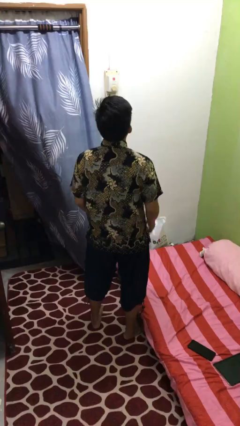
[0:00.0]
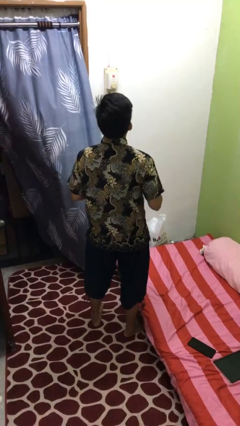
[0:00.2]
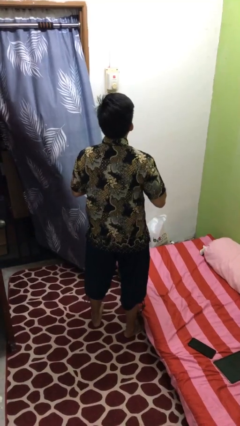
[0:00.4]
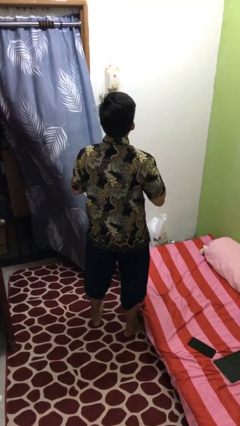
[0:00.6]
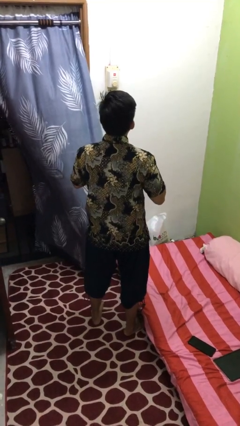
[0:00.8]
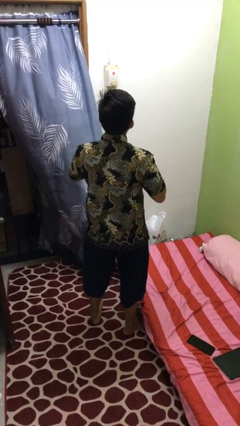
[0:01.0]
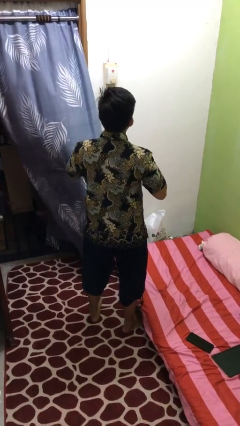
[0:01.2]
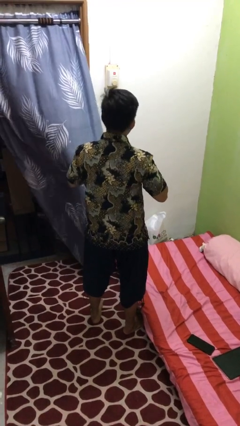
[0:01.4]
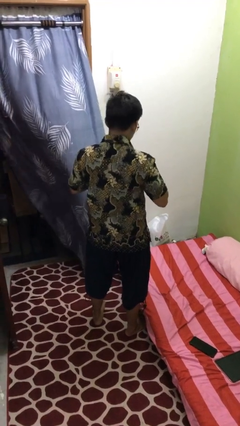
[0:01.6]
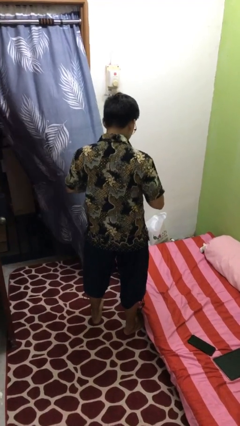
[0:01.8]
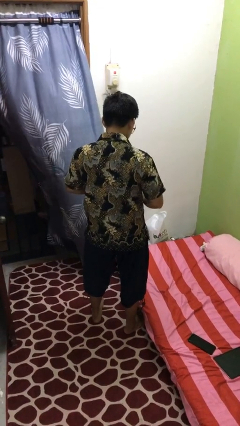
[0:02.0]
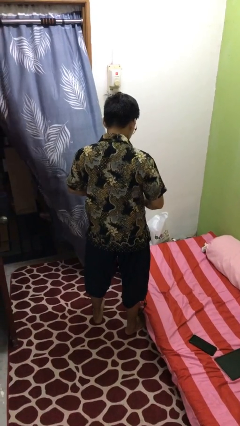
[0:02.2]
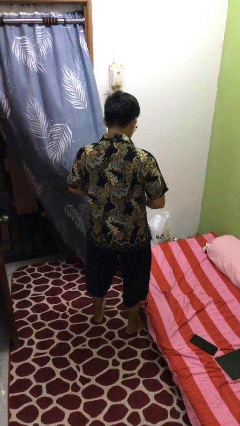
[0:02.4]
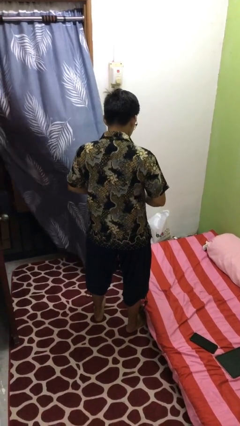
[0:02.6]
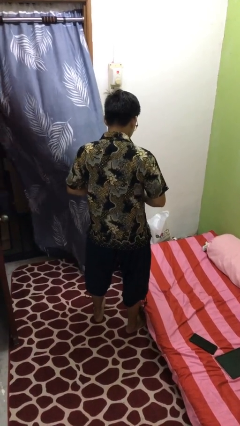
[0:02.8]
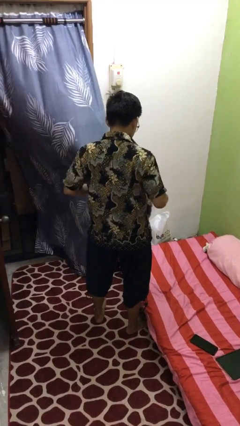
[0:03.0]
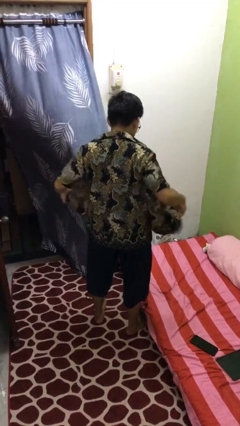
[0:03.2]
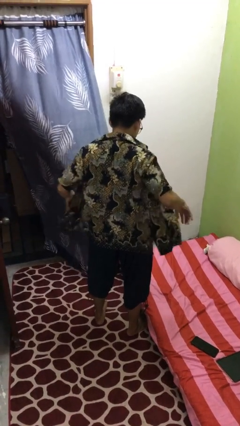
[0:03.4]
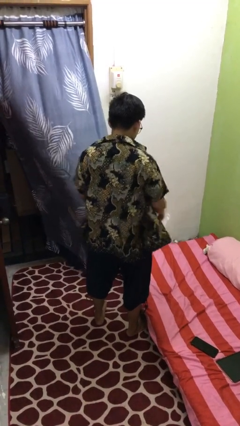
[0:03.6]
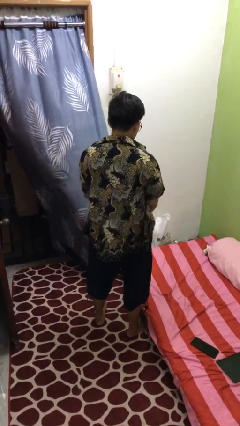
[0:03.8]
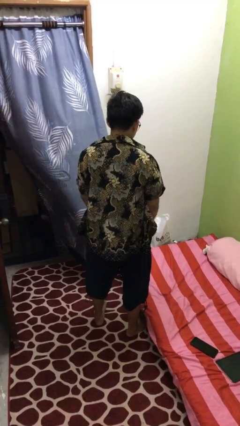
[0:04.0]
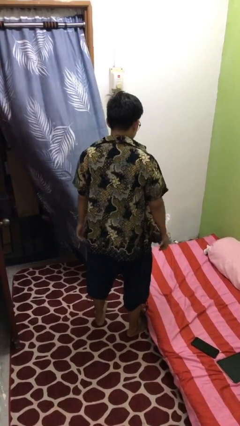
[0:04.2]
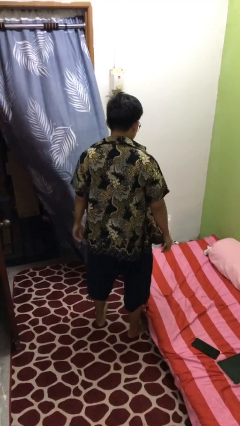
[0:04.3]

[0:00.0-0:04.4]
person unbuttons shirt

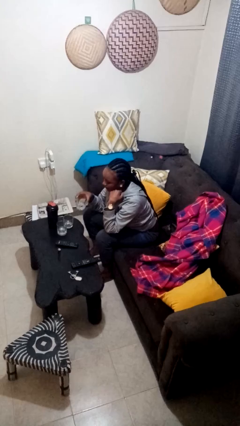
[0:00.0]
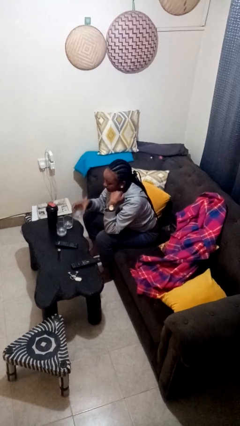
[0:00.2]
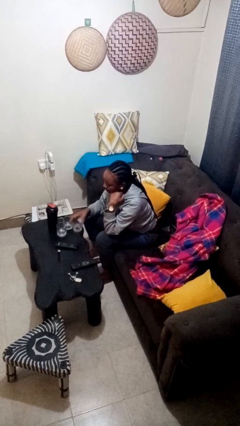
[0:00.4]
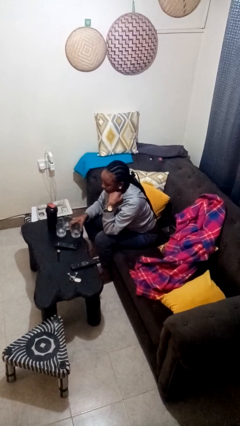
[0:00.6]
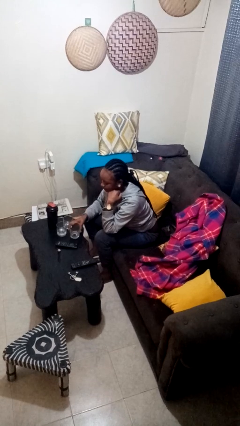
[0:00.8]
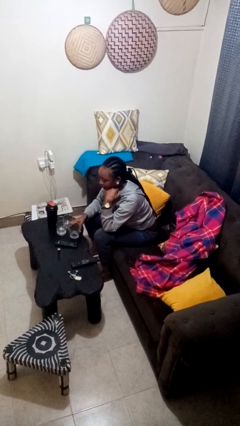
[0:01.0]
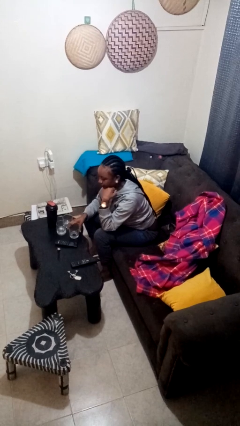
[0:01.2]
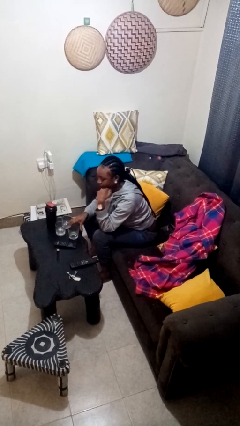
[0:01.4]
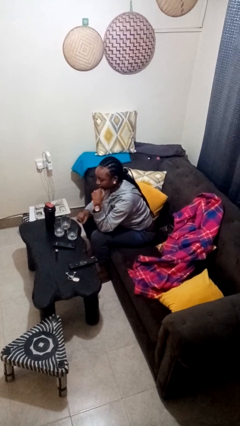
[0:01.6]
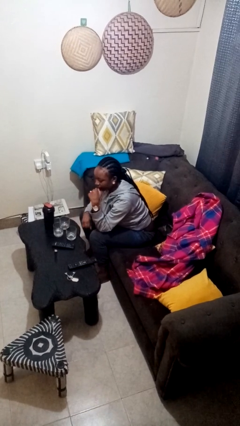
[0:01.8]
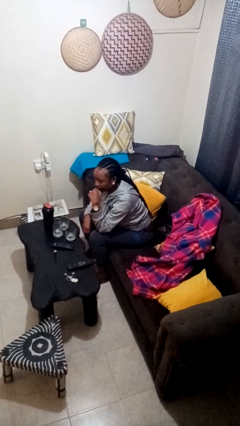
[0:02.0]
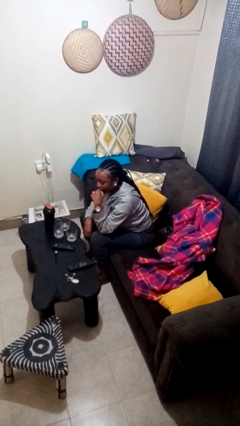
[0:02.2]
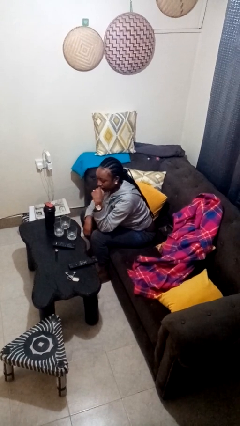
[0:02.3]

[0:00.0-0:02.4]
person puts down object on table

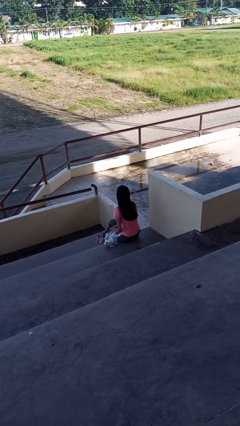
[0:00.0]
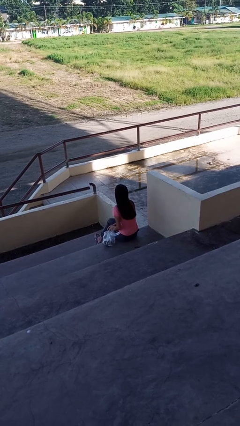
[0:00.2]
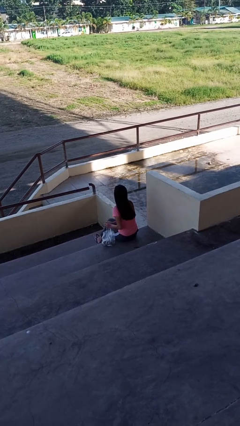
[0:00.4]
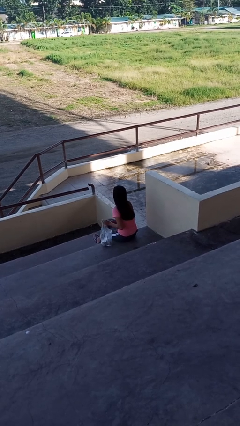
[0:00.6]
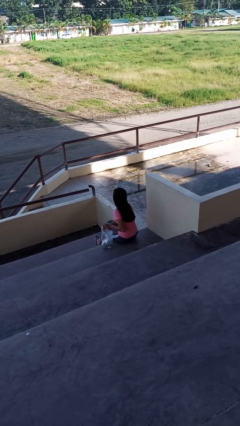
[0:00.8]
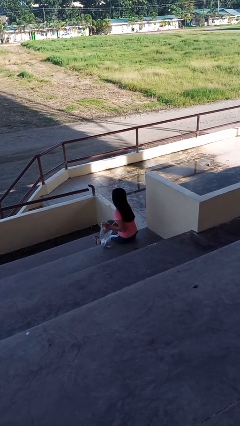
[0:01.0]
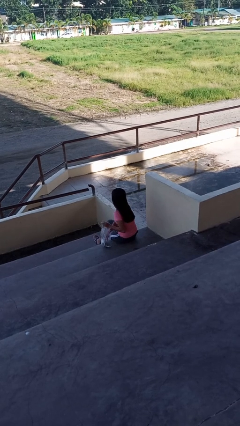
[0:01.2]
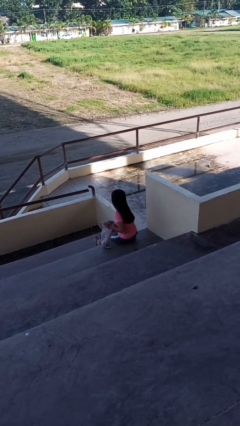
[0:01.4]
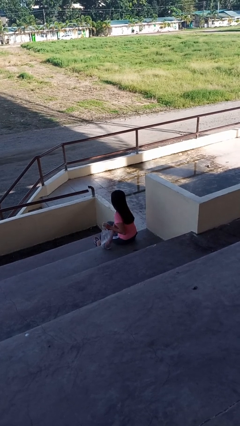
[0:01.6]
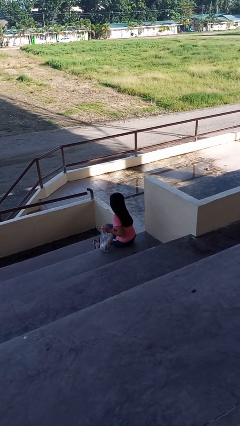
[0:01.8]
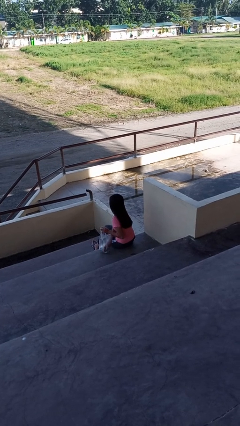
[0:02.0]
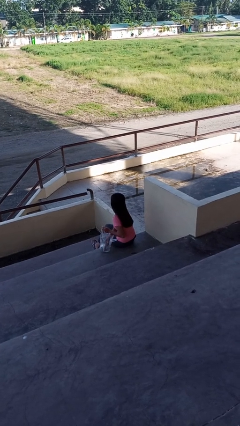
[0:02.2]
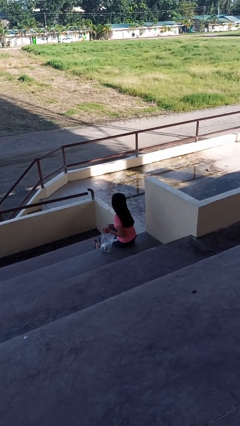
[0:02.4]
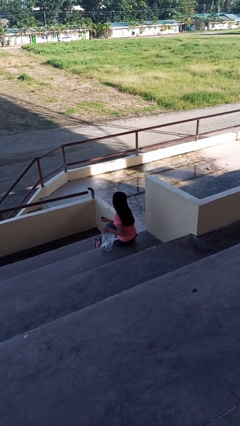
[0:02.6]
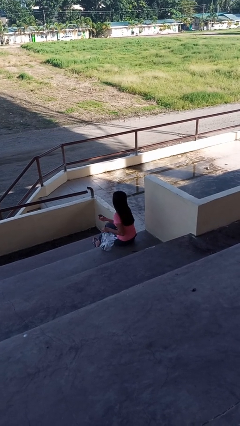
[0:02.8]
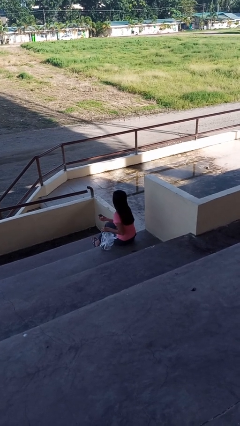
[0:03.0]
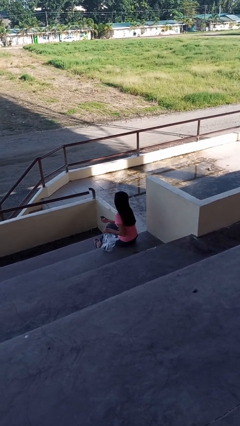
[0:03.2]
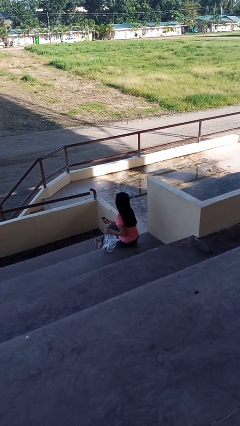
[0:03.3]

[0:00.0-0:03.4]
person takes object from bag

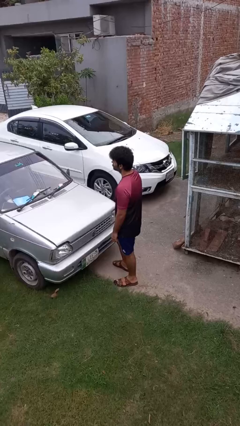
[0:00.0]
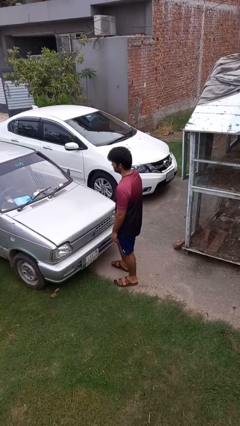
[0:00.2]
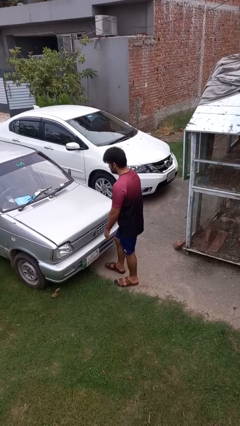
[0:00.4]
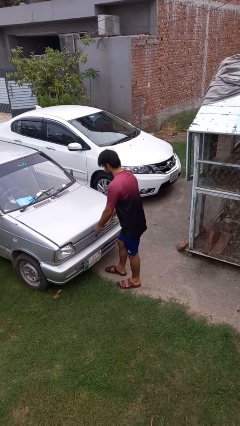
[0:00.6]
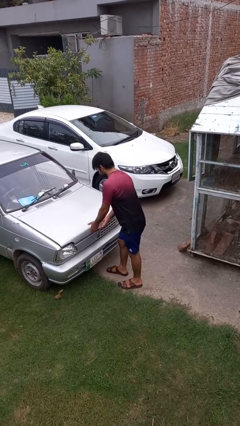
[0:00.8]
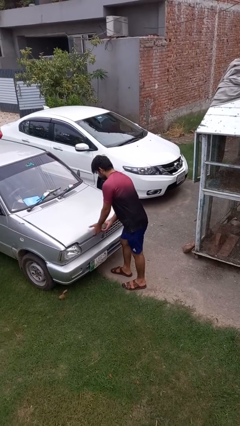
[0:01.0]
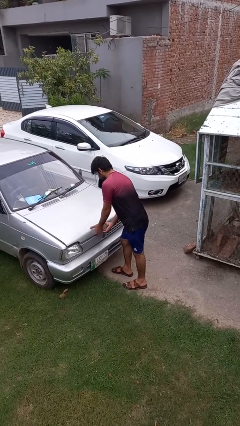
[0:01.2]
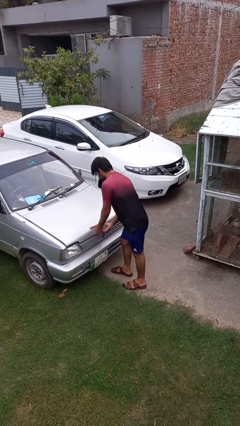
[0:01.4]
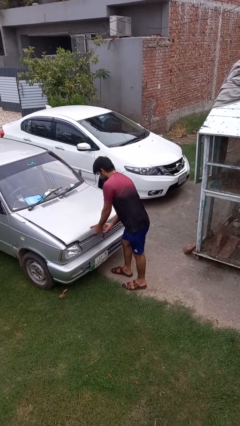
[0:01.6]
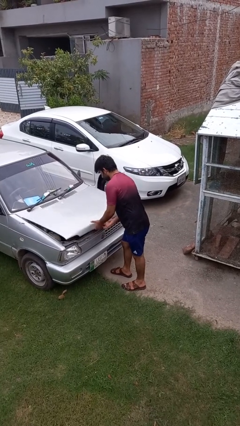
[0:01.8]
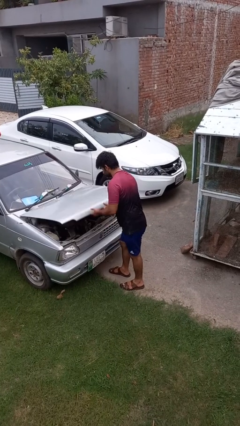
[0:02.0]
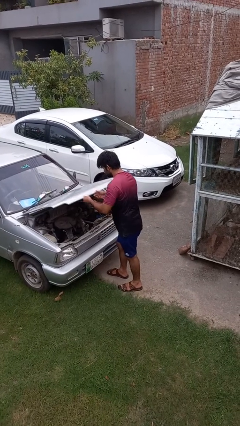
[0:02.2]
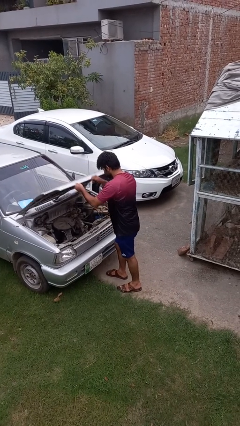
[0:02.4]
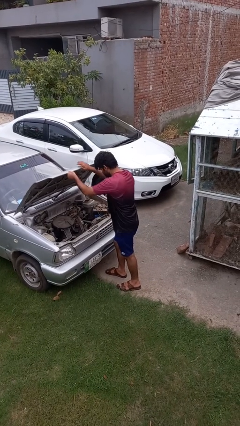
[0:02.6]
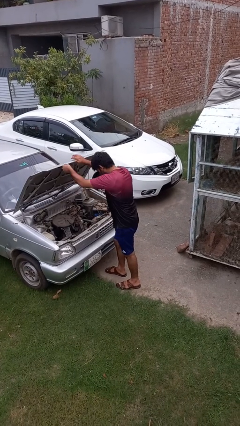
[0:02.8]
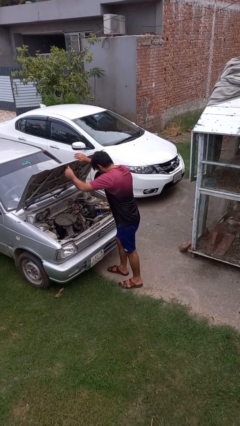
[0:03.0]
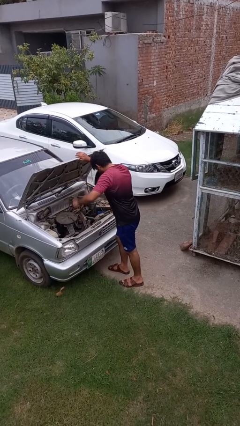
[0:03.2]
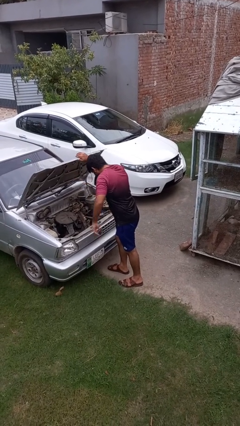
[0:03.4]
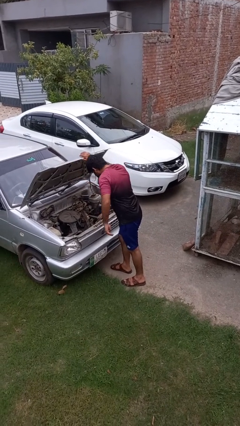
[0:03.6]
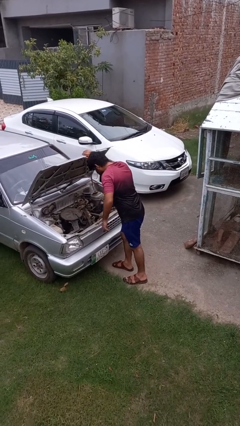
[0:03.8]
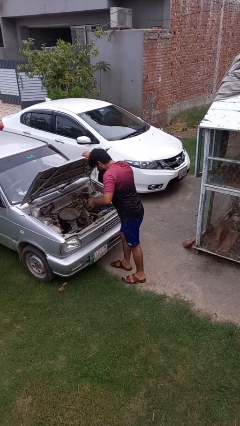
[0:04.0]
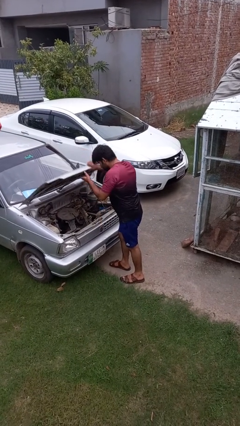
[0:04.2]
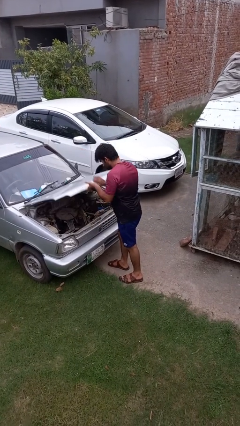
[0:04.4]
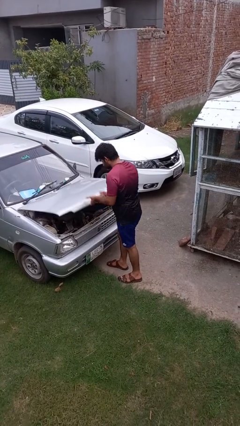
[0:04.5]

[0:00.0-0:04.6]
person opens car hood

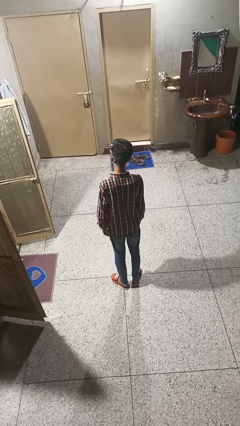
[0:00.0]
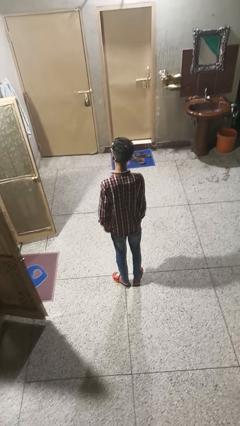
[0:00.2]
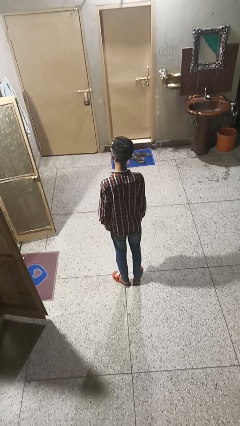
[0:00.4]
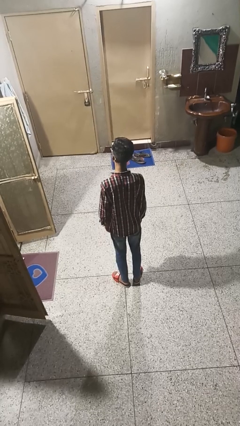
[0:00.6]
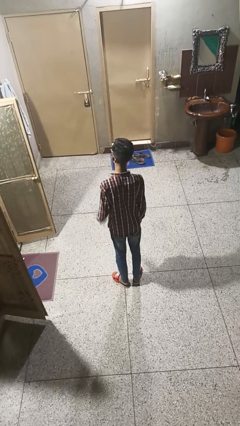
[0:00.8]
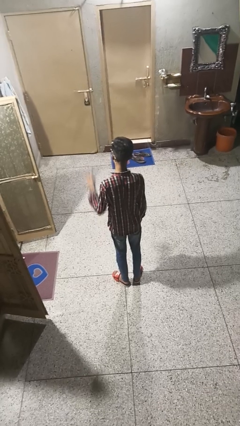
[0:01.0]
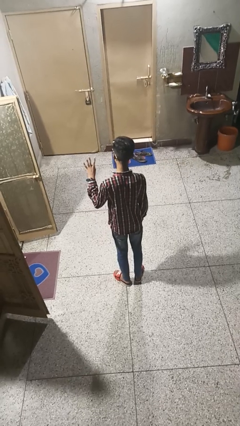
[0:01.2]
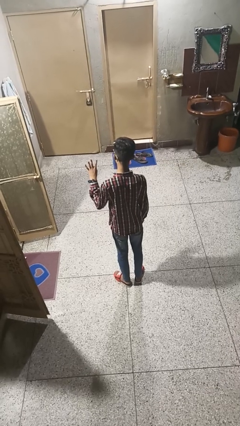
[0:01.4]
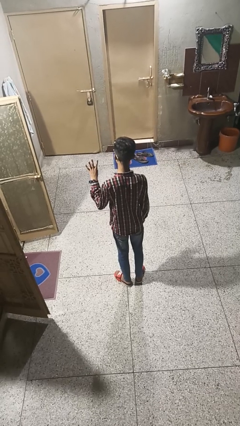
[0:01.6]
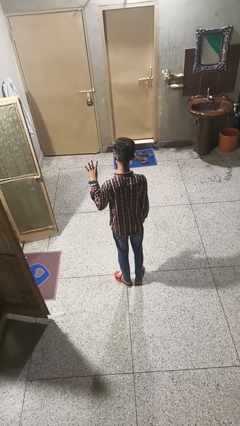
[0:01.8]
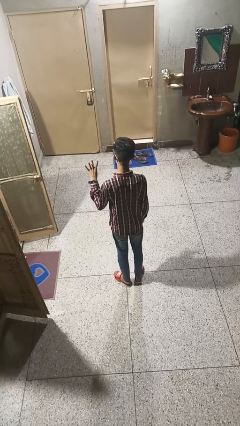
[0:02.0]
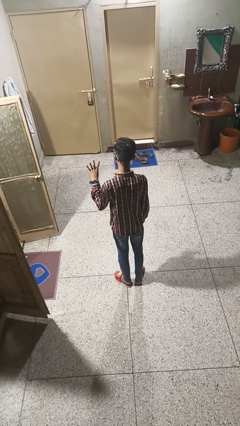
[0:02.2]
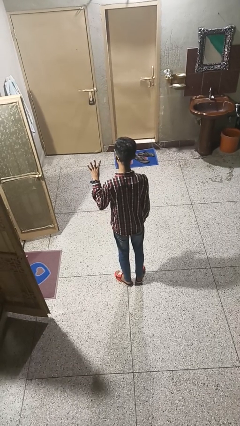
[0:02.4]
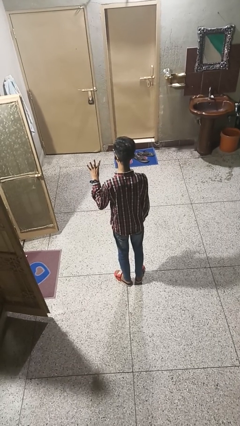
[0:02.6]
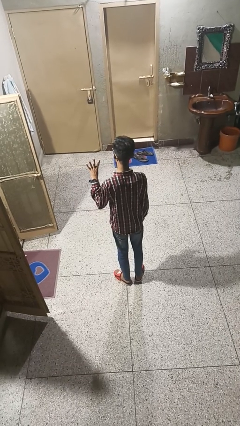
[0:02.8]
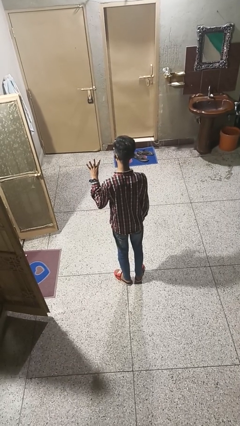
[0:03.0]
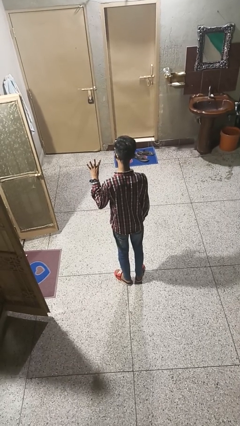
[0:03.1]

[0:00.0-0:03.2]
person gestures number four
